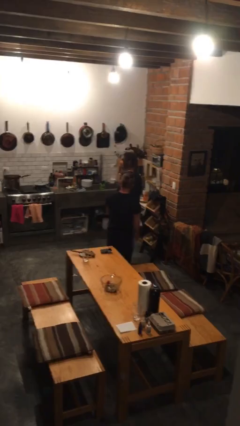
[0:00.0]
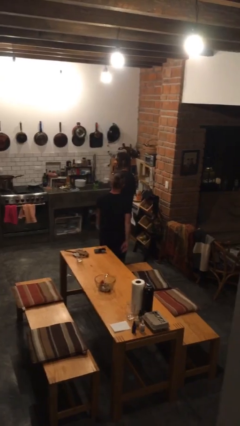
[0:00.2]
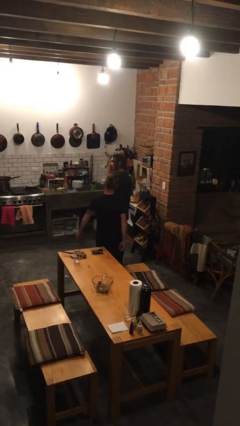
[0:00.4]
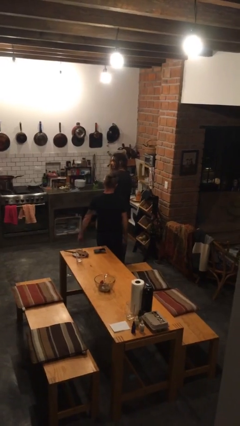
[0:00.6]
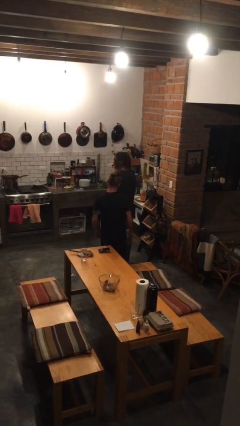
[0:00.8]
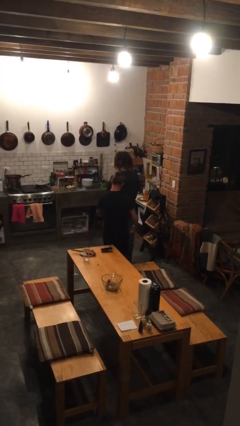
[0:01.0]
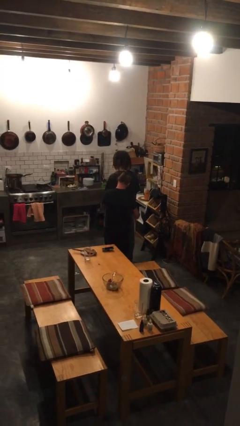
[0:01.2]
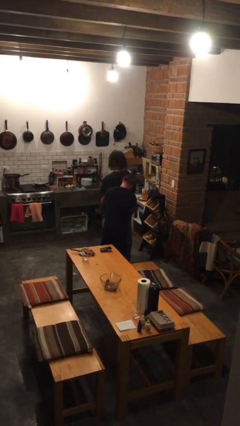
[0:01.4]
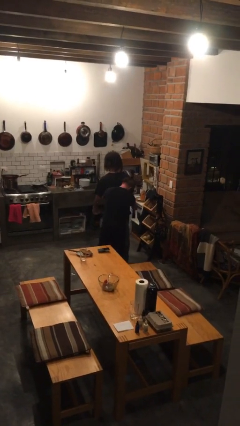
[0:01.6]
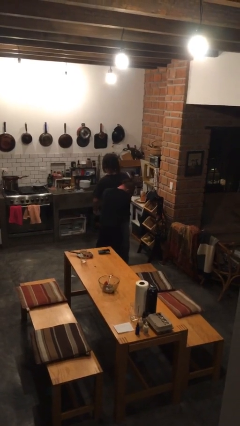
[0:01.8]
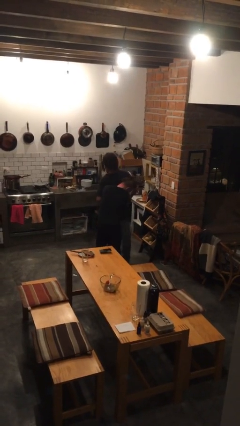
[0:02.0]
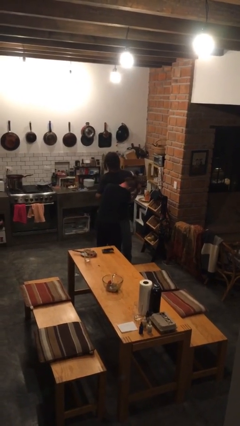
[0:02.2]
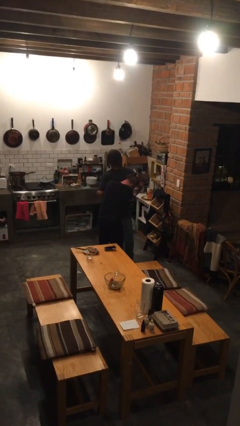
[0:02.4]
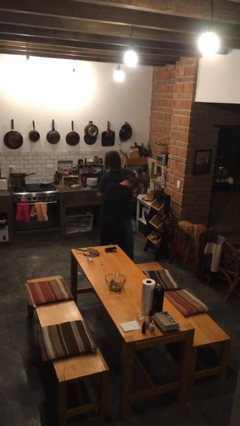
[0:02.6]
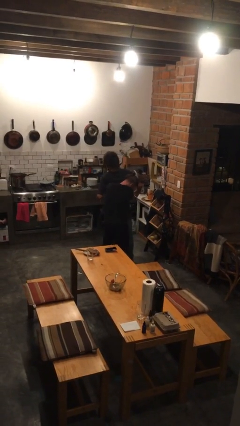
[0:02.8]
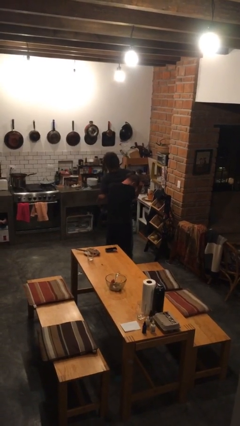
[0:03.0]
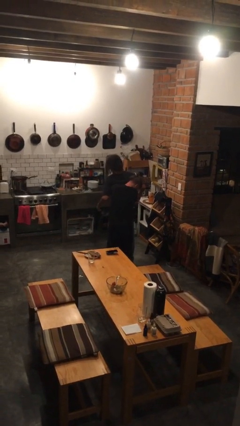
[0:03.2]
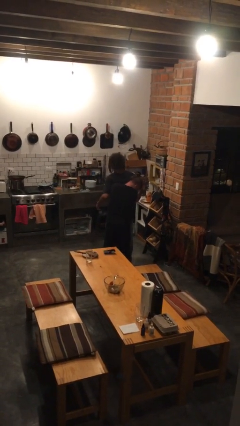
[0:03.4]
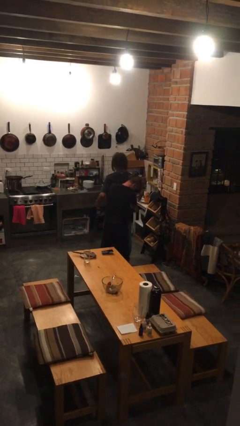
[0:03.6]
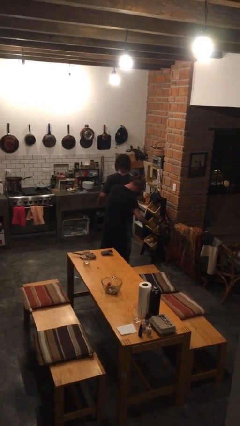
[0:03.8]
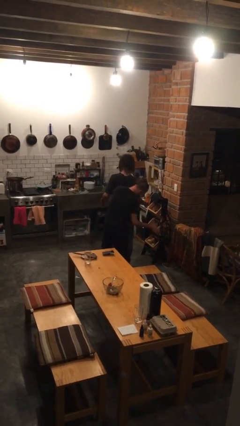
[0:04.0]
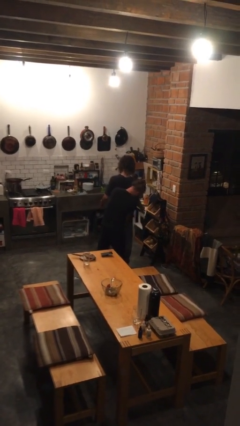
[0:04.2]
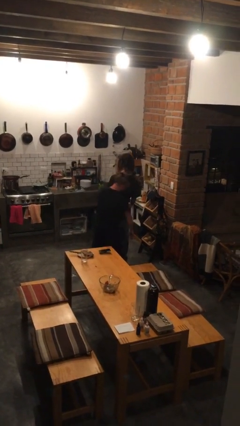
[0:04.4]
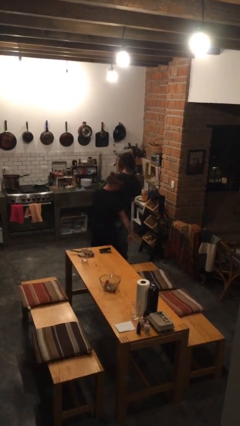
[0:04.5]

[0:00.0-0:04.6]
person hugs person from behind

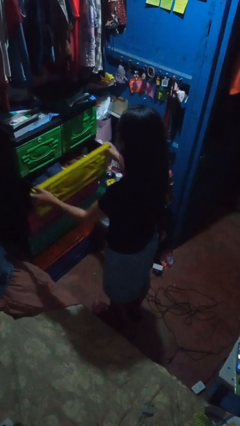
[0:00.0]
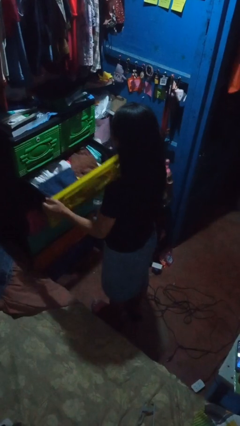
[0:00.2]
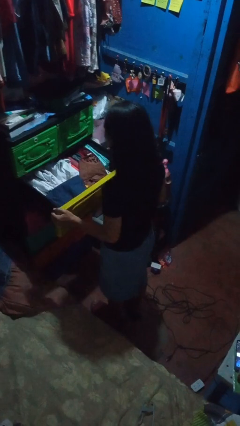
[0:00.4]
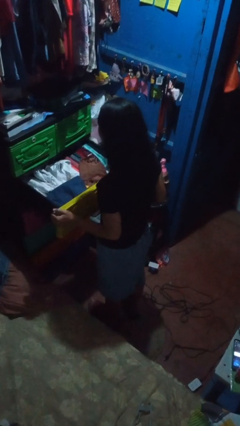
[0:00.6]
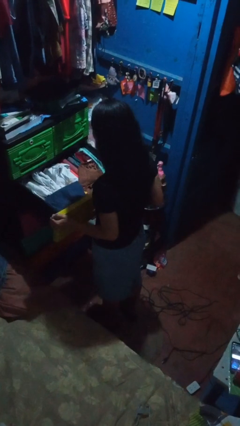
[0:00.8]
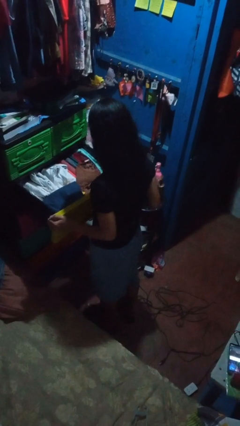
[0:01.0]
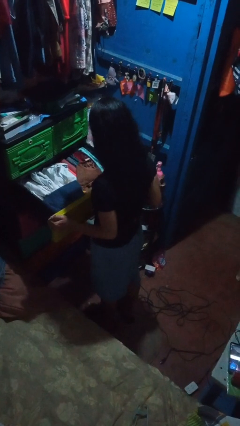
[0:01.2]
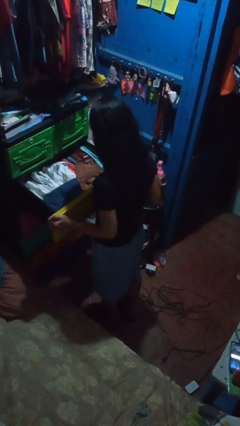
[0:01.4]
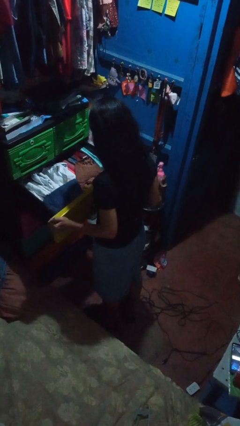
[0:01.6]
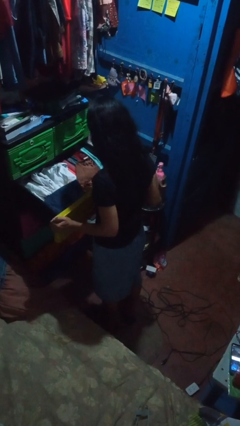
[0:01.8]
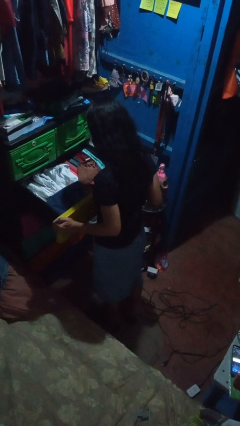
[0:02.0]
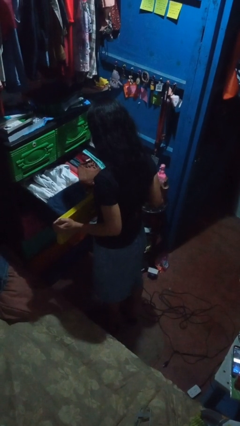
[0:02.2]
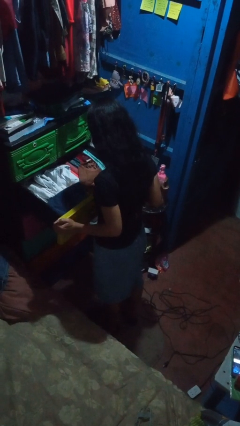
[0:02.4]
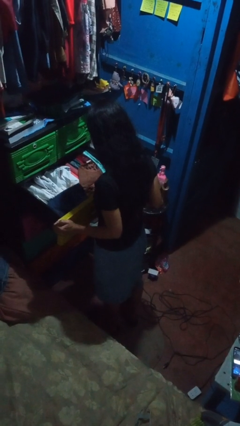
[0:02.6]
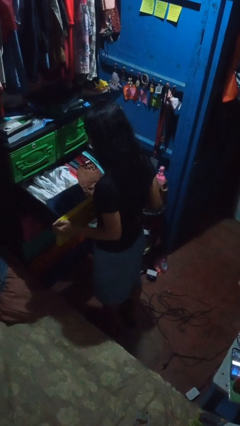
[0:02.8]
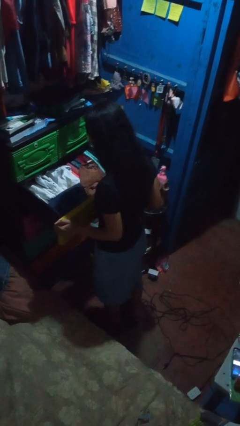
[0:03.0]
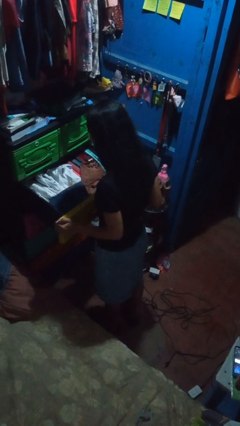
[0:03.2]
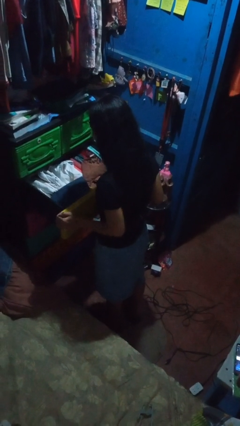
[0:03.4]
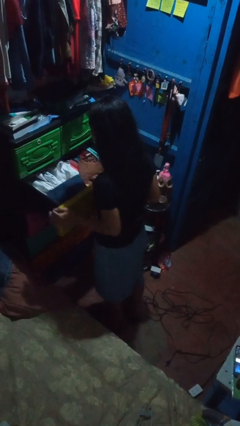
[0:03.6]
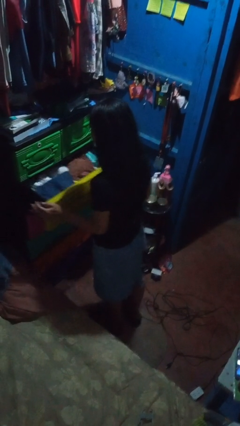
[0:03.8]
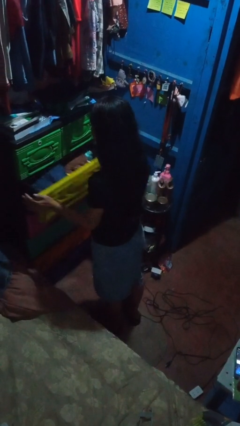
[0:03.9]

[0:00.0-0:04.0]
person opens dresser drawer

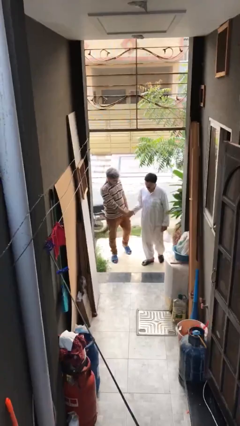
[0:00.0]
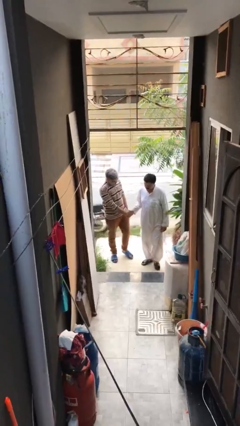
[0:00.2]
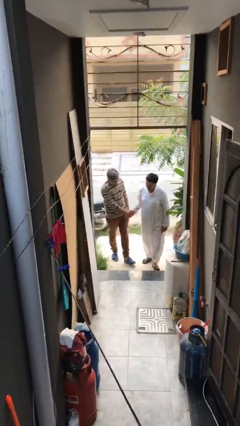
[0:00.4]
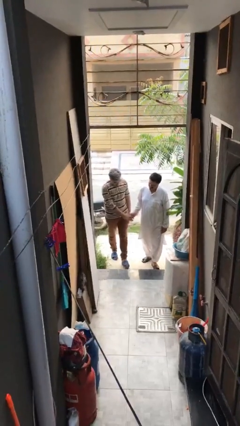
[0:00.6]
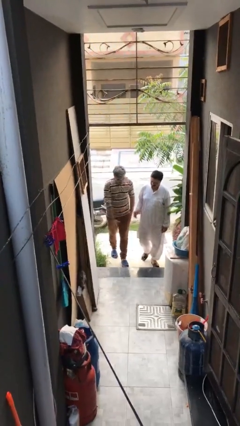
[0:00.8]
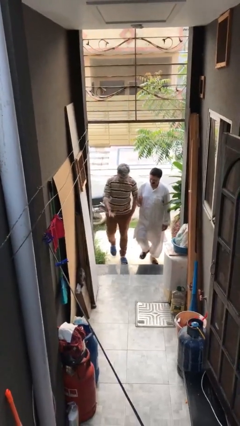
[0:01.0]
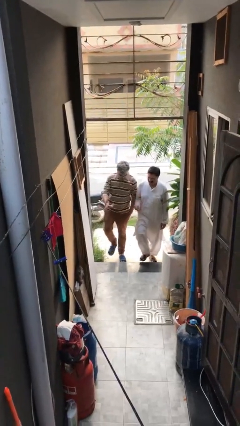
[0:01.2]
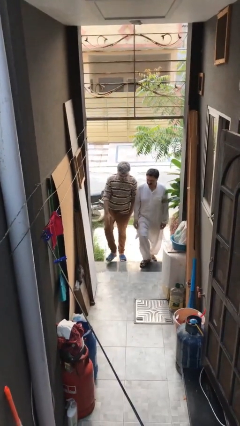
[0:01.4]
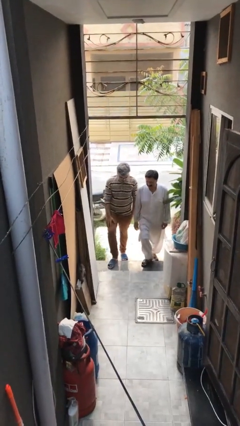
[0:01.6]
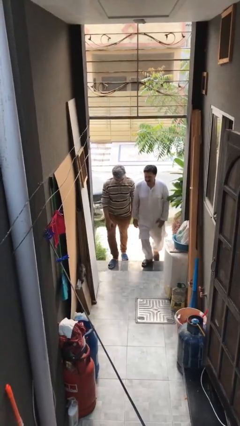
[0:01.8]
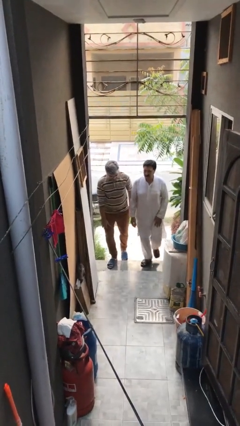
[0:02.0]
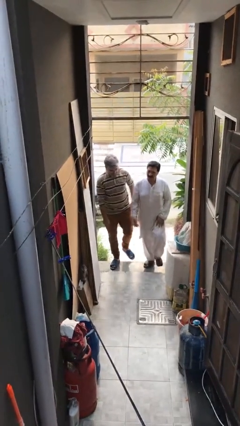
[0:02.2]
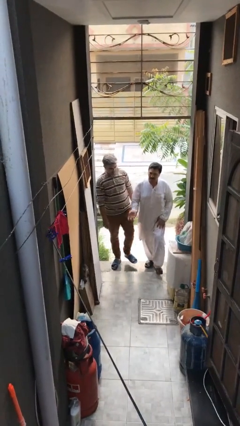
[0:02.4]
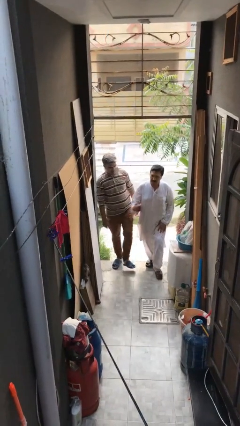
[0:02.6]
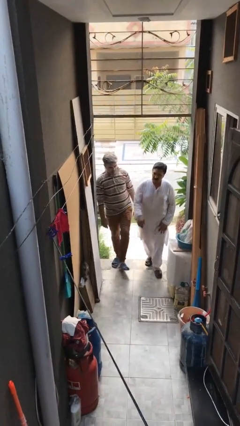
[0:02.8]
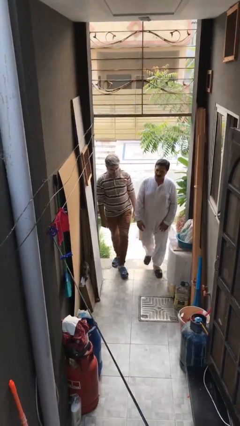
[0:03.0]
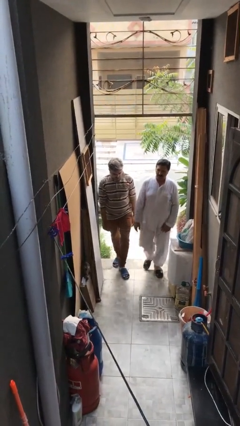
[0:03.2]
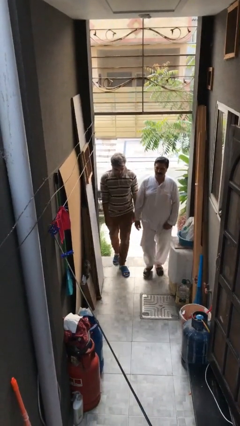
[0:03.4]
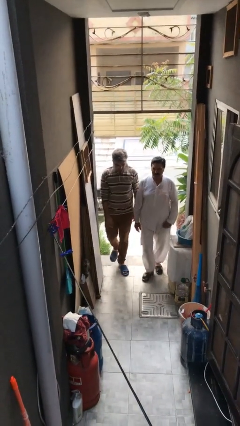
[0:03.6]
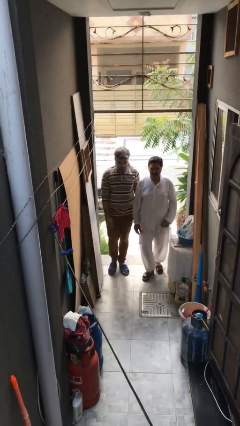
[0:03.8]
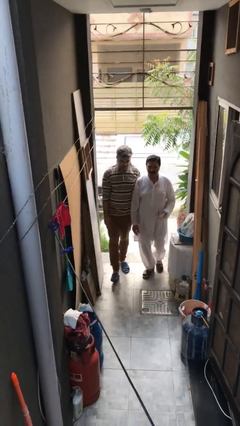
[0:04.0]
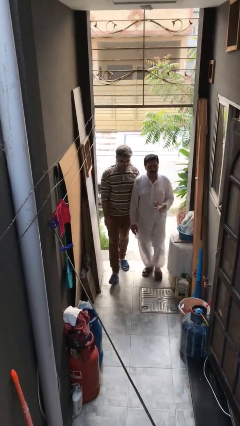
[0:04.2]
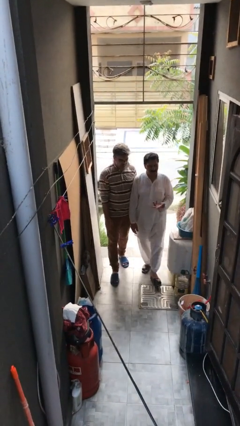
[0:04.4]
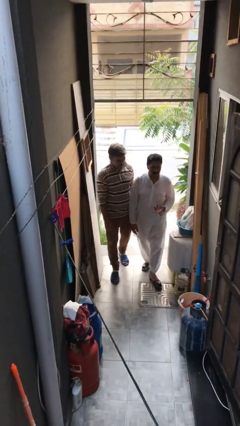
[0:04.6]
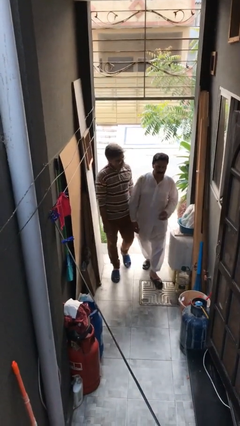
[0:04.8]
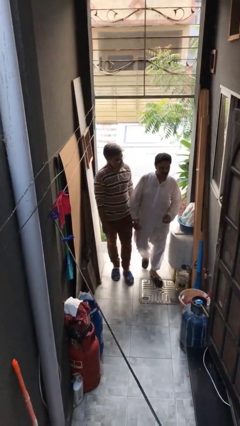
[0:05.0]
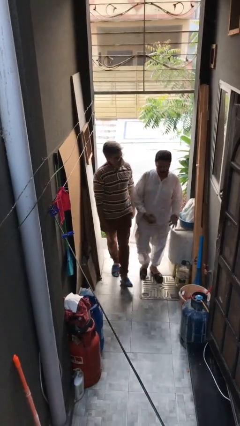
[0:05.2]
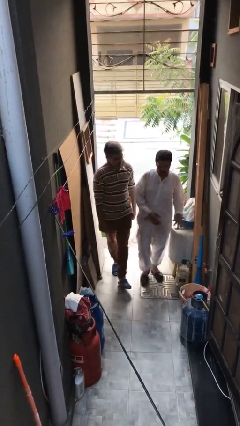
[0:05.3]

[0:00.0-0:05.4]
person talks to person

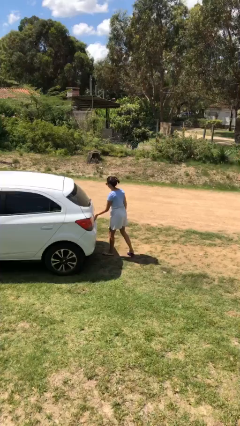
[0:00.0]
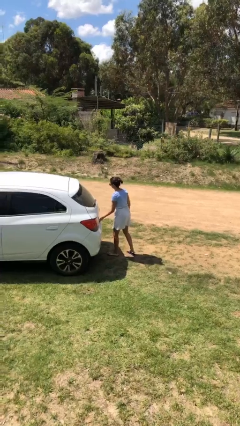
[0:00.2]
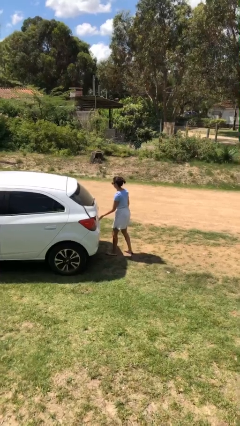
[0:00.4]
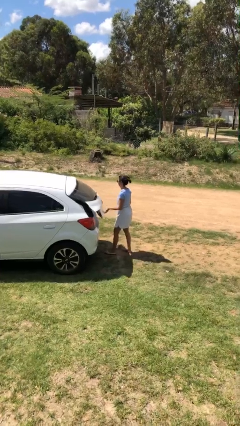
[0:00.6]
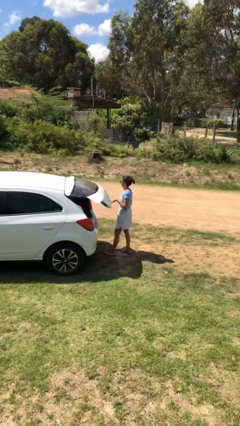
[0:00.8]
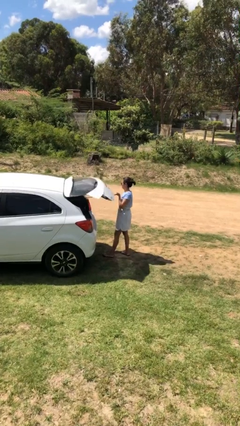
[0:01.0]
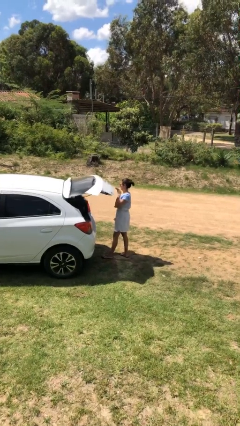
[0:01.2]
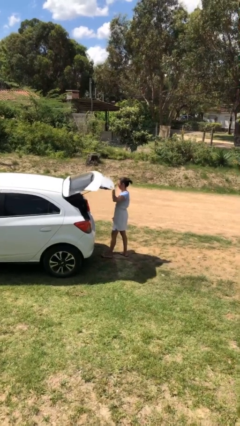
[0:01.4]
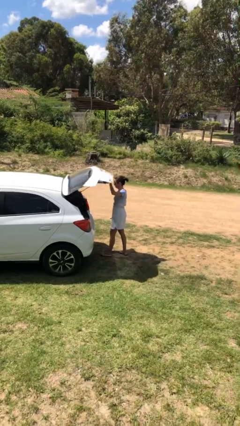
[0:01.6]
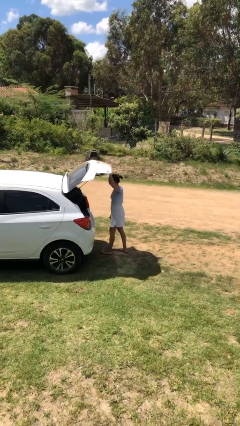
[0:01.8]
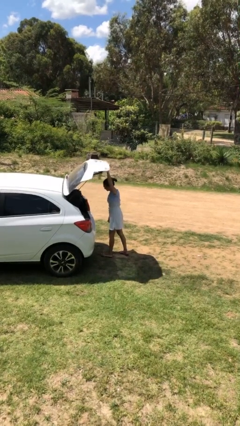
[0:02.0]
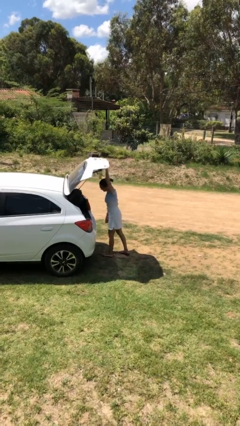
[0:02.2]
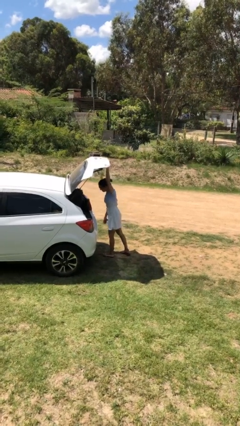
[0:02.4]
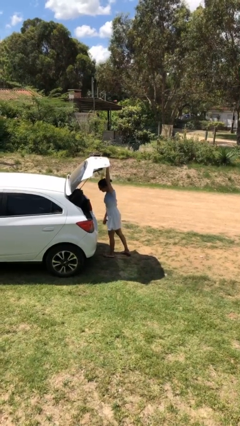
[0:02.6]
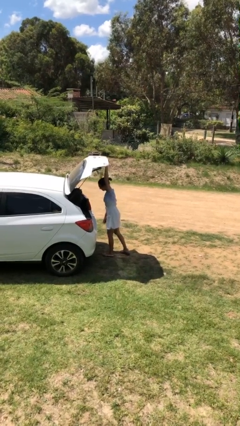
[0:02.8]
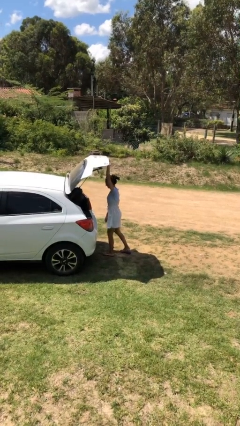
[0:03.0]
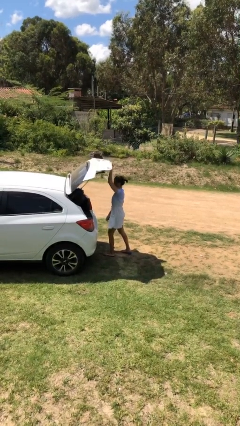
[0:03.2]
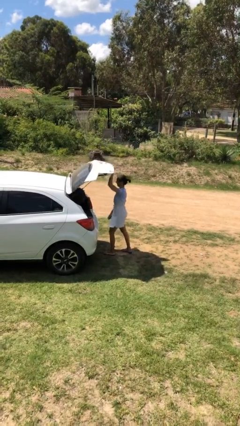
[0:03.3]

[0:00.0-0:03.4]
person opens car trunk

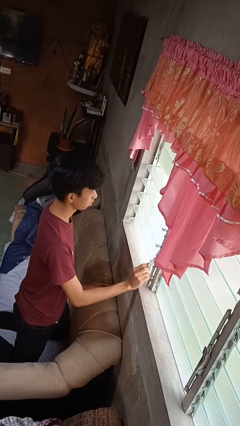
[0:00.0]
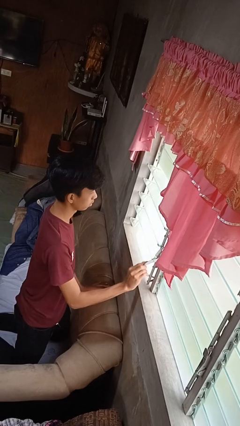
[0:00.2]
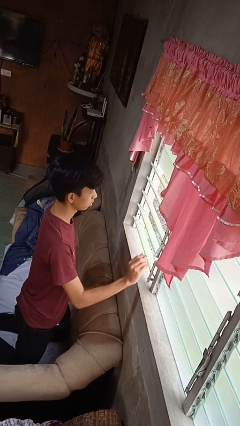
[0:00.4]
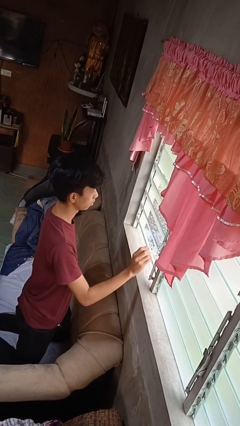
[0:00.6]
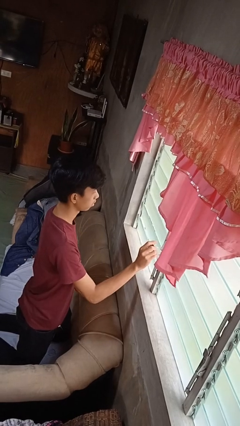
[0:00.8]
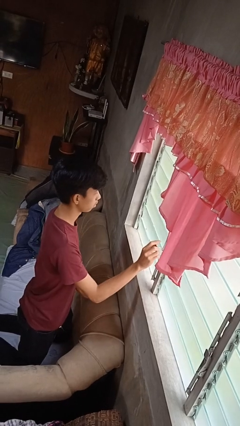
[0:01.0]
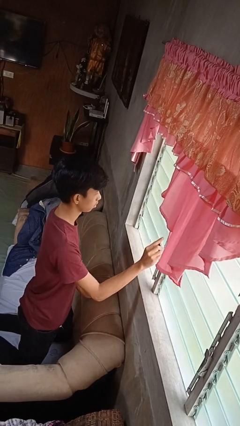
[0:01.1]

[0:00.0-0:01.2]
person closes home window
